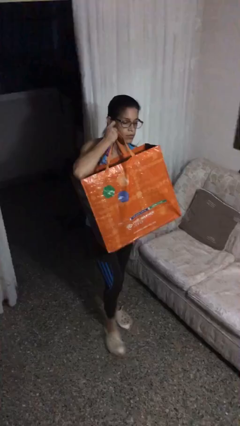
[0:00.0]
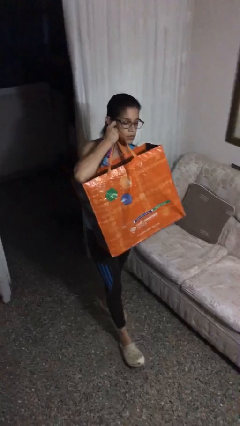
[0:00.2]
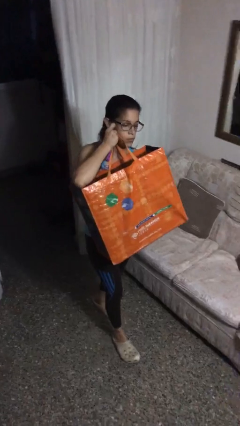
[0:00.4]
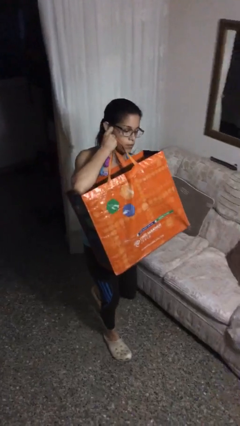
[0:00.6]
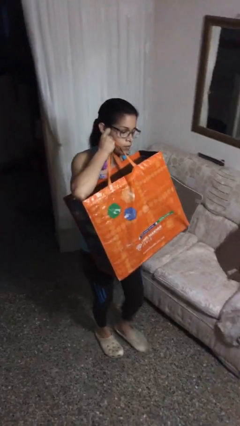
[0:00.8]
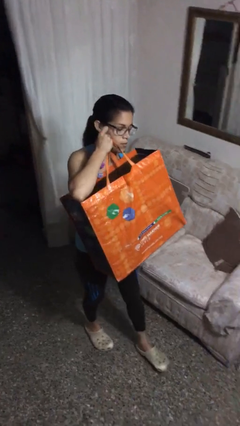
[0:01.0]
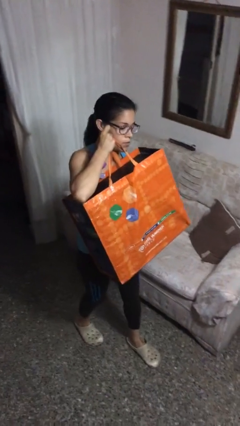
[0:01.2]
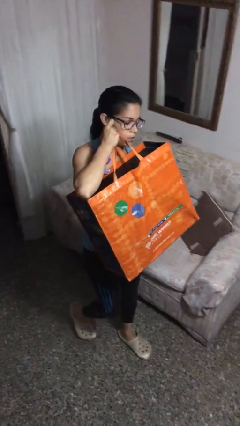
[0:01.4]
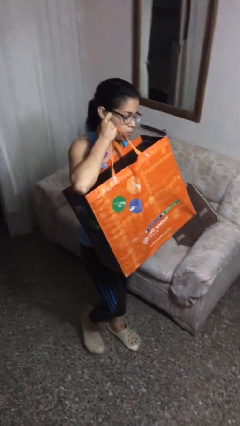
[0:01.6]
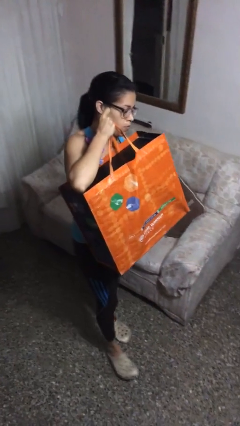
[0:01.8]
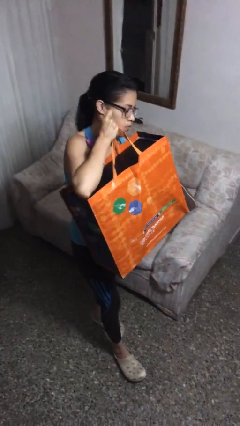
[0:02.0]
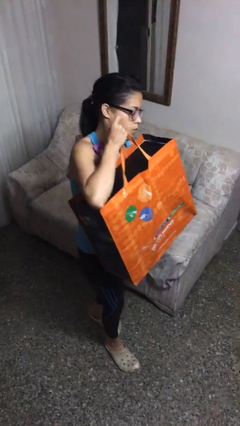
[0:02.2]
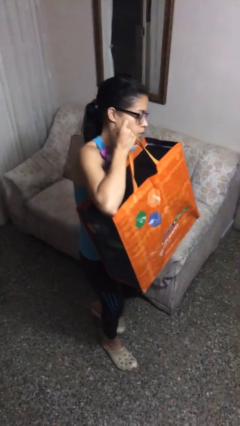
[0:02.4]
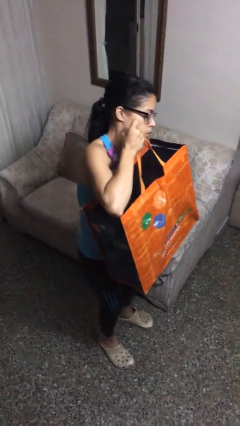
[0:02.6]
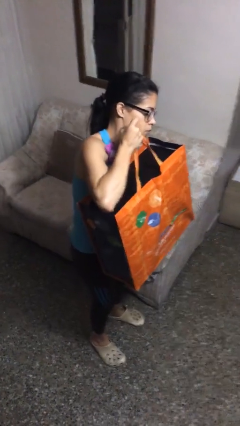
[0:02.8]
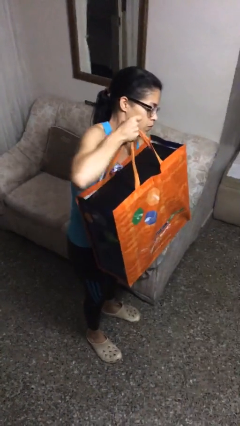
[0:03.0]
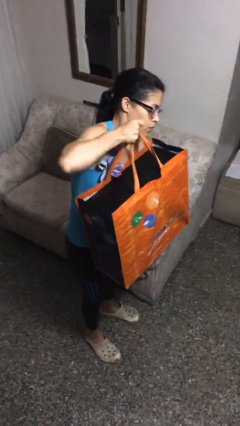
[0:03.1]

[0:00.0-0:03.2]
person carries heavy object

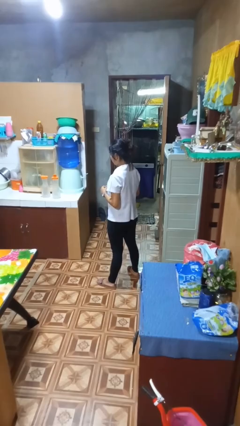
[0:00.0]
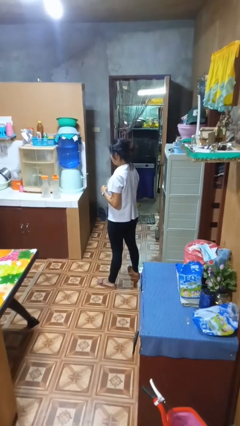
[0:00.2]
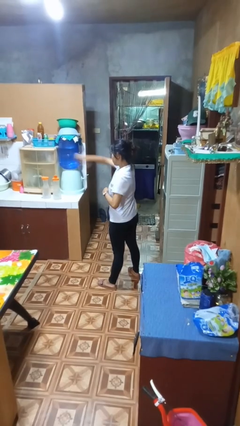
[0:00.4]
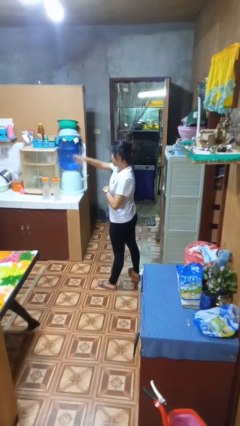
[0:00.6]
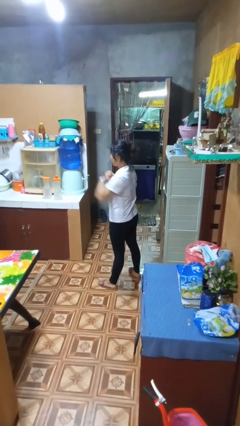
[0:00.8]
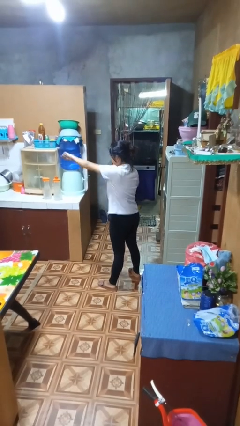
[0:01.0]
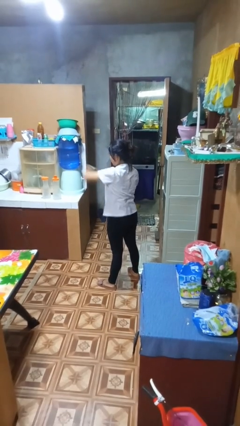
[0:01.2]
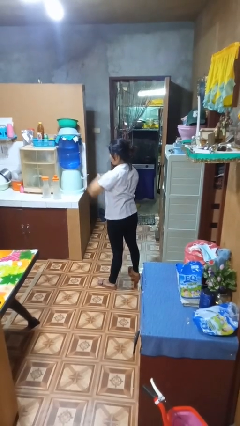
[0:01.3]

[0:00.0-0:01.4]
person punches

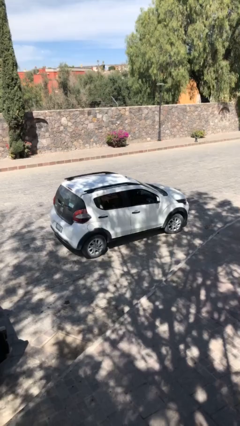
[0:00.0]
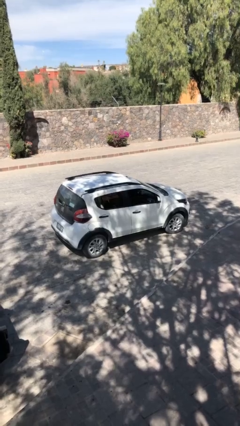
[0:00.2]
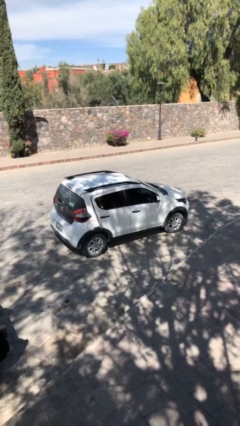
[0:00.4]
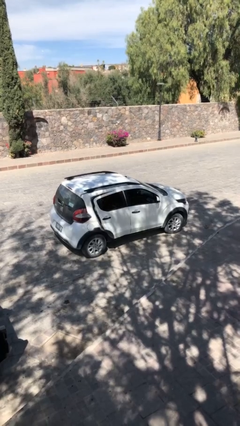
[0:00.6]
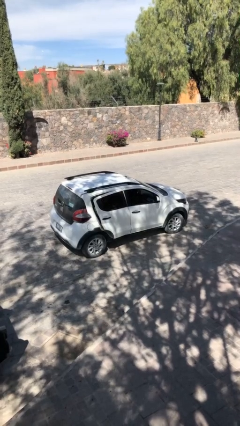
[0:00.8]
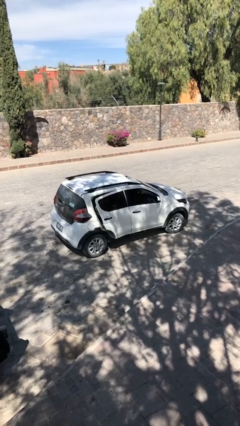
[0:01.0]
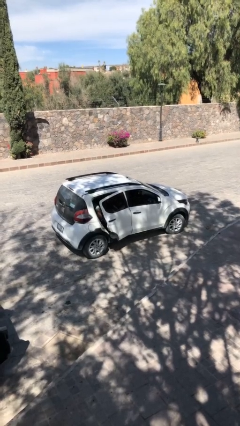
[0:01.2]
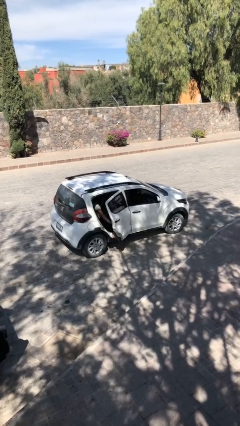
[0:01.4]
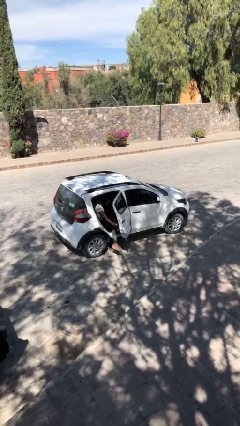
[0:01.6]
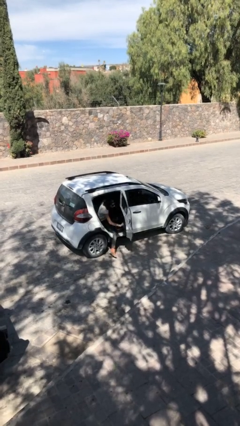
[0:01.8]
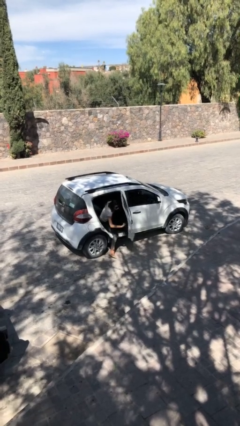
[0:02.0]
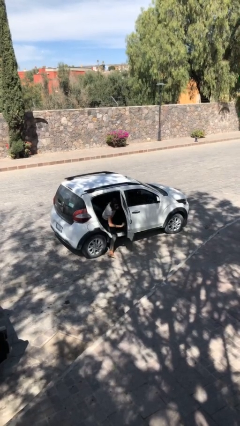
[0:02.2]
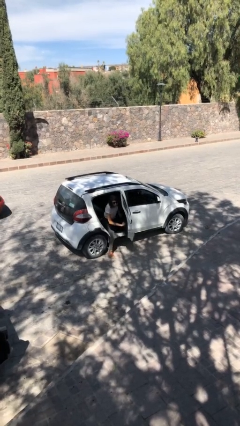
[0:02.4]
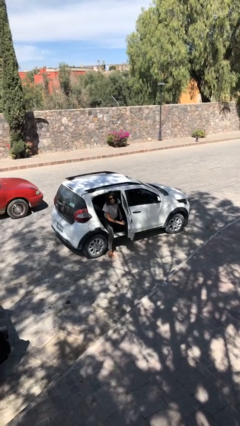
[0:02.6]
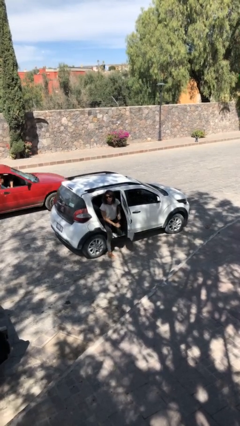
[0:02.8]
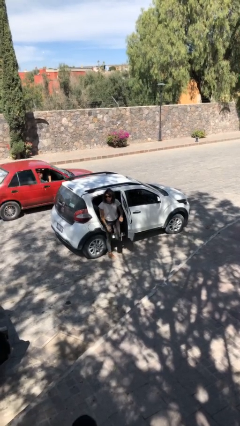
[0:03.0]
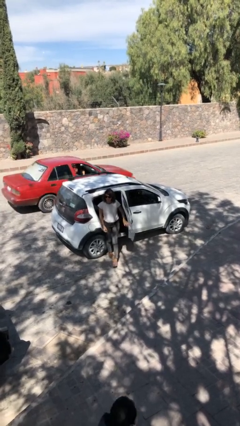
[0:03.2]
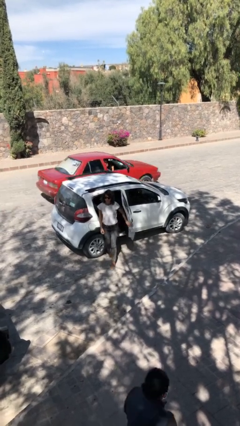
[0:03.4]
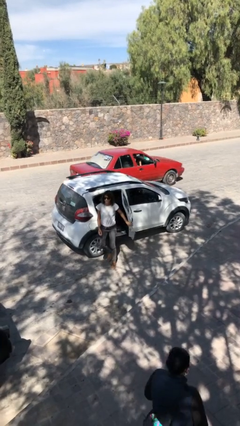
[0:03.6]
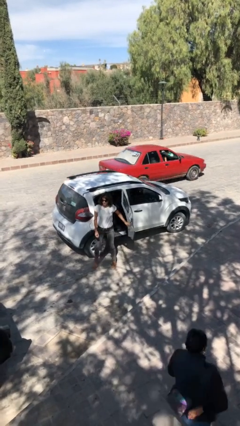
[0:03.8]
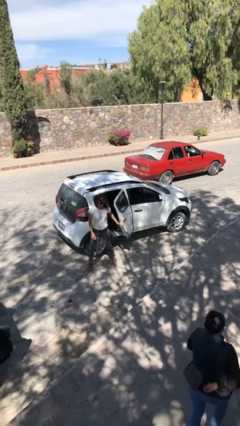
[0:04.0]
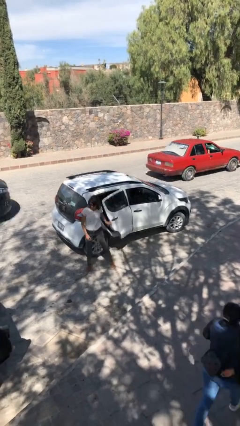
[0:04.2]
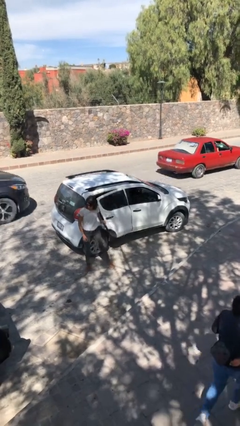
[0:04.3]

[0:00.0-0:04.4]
car drops off person

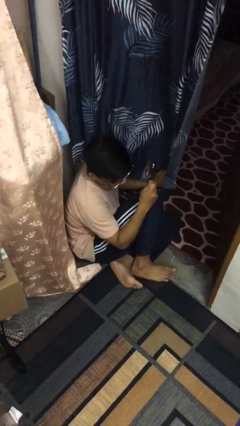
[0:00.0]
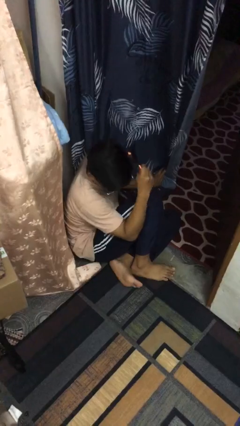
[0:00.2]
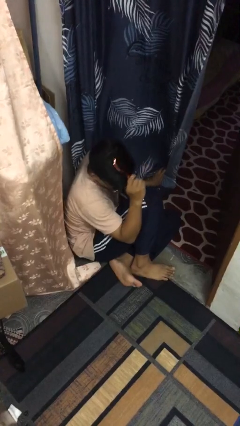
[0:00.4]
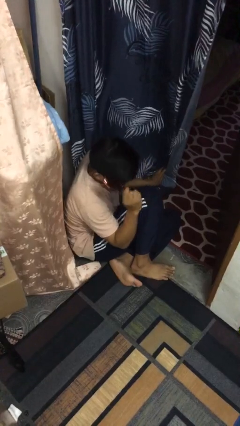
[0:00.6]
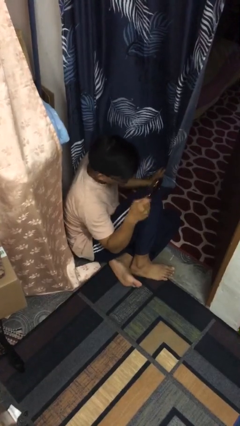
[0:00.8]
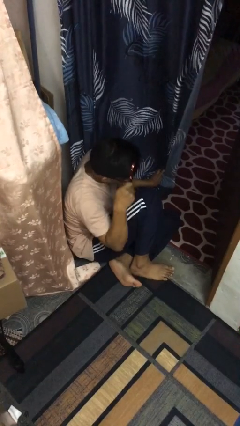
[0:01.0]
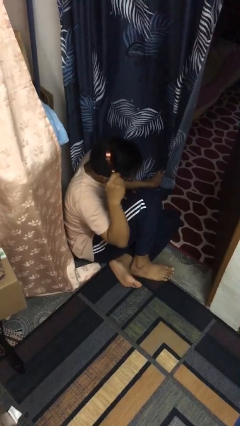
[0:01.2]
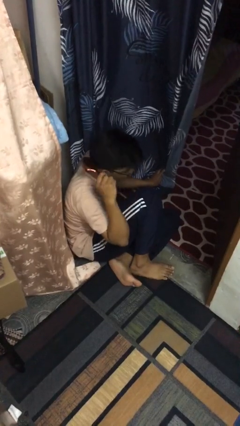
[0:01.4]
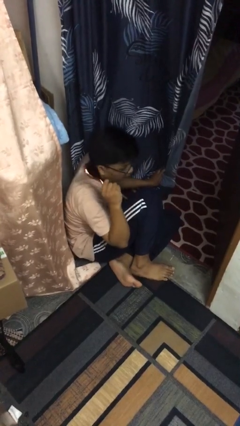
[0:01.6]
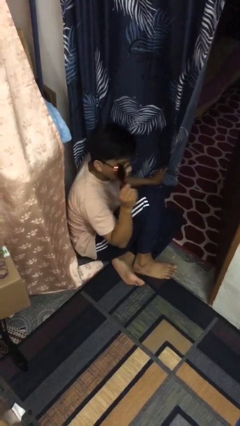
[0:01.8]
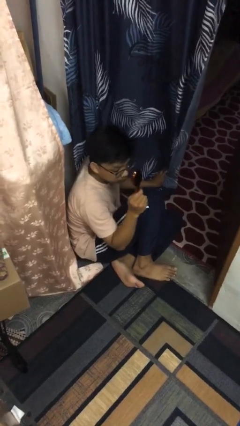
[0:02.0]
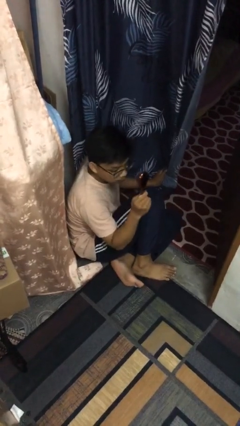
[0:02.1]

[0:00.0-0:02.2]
person brushes hair

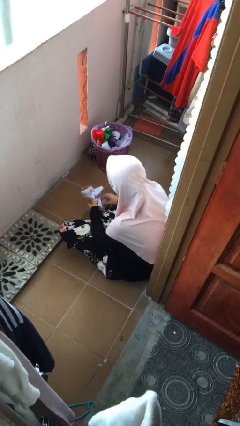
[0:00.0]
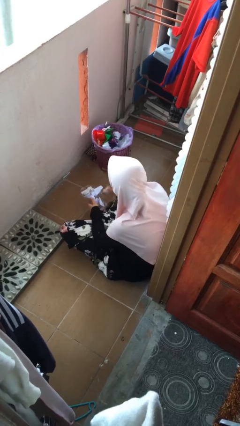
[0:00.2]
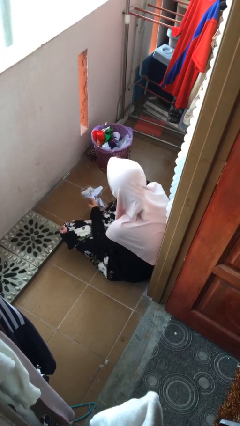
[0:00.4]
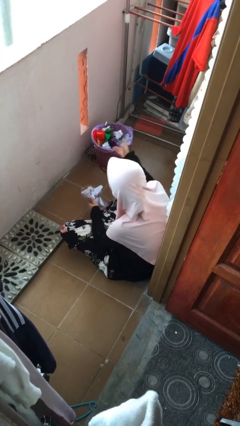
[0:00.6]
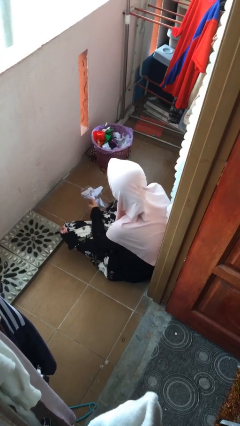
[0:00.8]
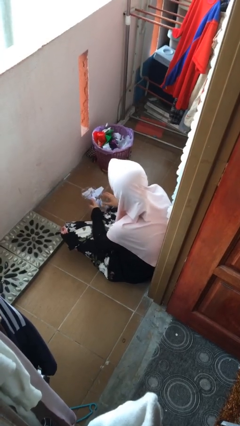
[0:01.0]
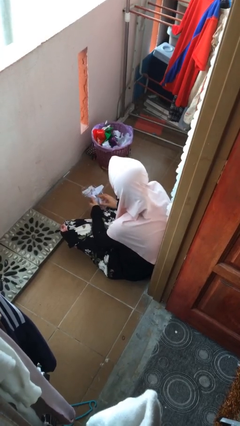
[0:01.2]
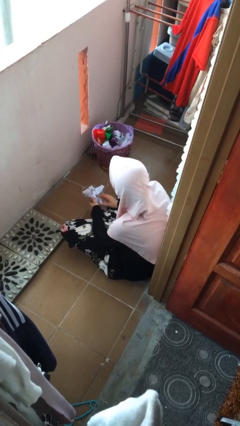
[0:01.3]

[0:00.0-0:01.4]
person discards trash

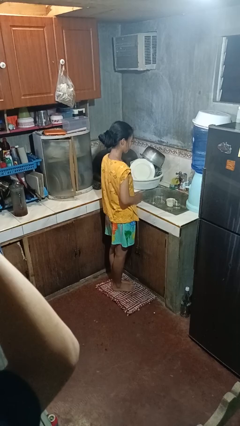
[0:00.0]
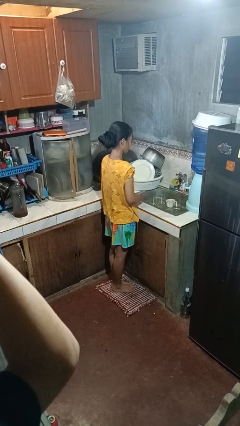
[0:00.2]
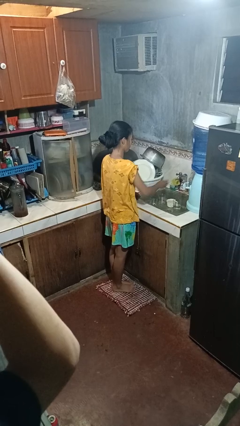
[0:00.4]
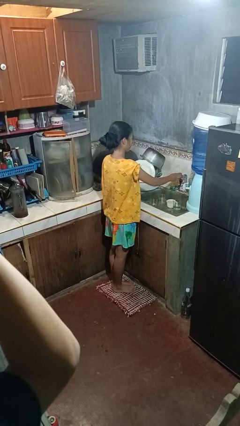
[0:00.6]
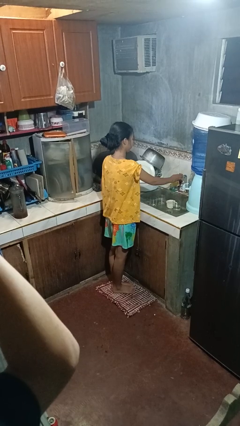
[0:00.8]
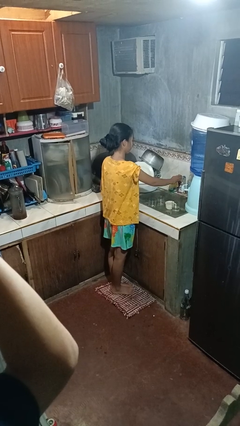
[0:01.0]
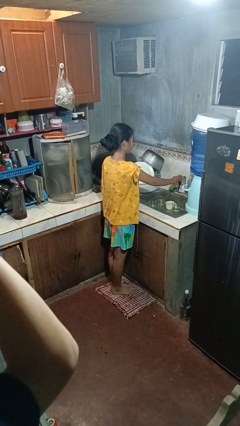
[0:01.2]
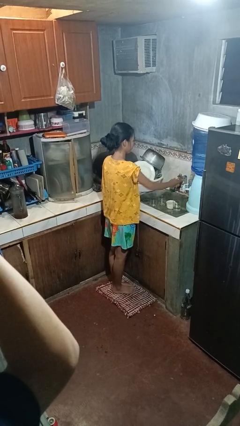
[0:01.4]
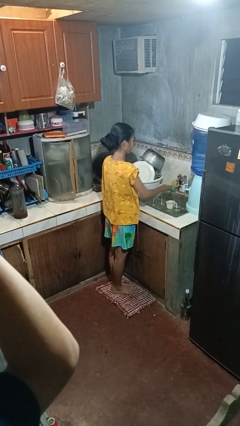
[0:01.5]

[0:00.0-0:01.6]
person turns on faucet

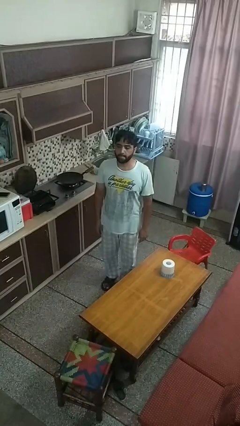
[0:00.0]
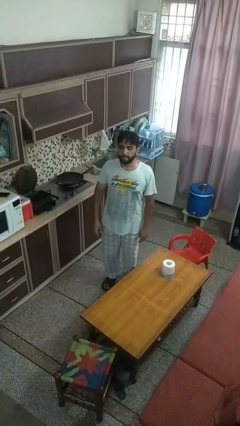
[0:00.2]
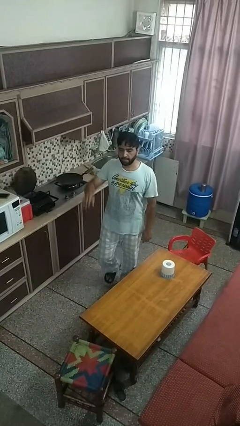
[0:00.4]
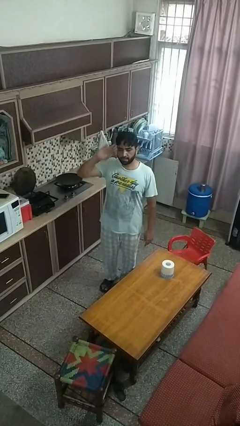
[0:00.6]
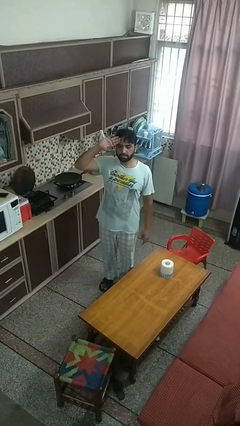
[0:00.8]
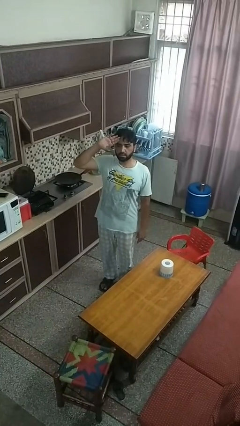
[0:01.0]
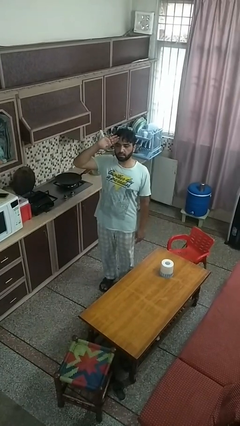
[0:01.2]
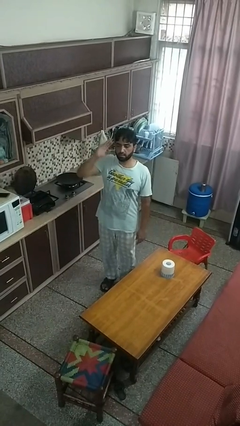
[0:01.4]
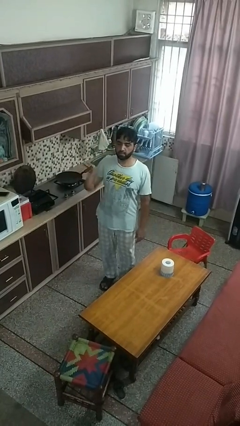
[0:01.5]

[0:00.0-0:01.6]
person salutes

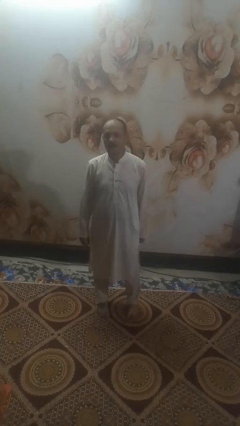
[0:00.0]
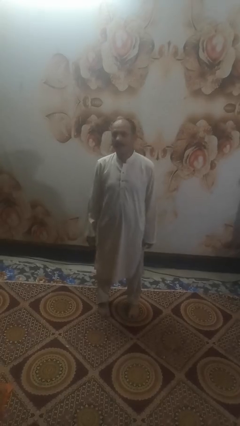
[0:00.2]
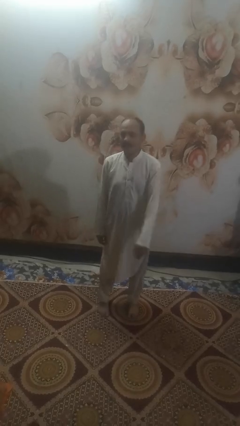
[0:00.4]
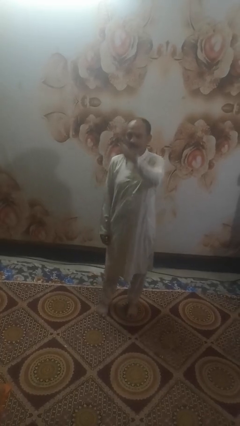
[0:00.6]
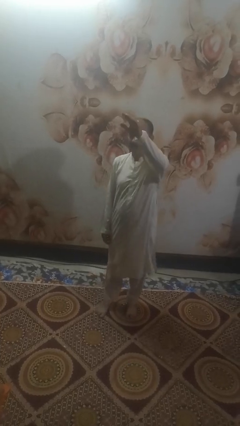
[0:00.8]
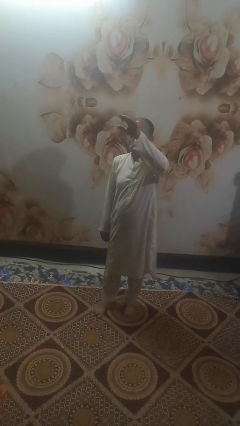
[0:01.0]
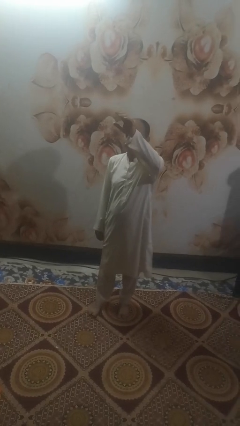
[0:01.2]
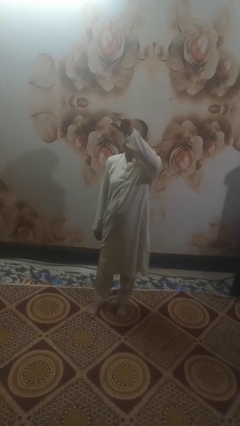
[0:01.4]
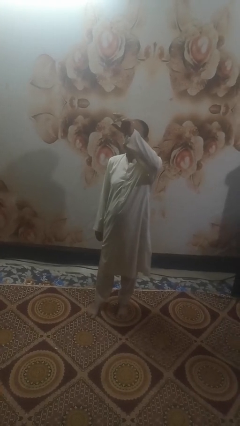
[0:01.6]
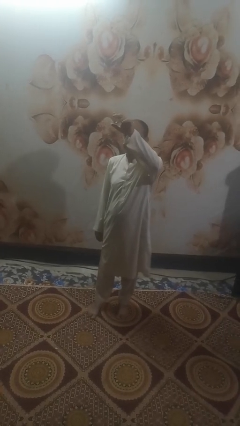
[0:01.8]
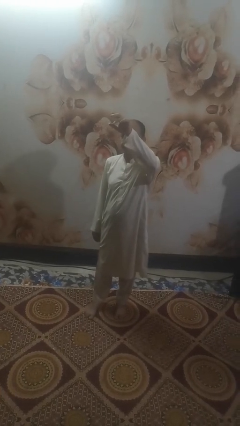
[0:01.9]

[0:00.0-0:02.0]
person gestures swipe up
